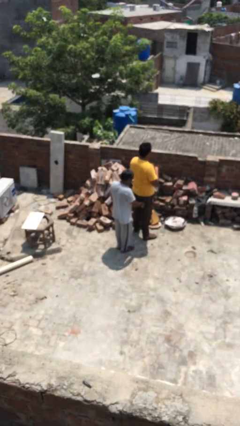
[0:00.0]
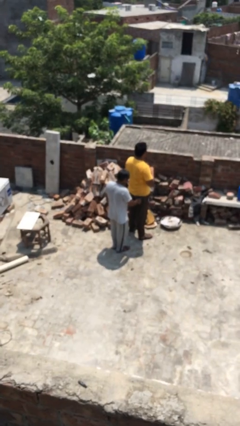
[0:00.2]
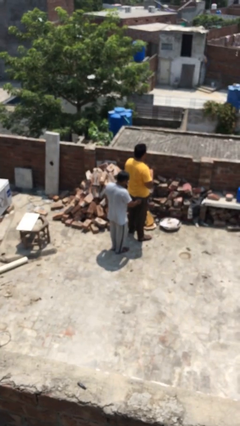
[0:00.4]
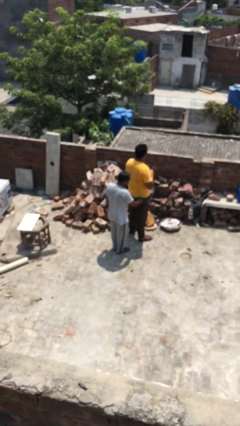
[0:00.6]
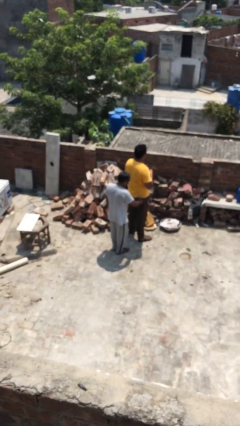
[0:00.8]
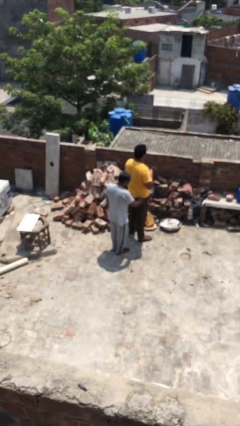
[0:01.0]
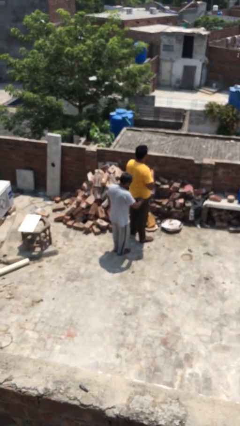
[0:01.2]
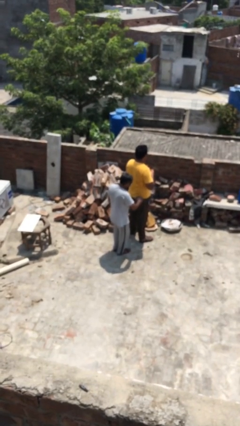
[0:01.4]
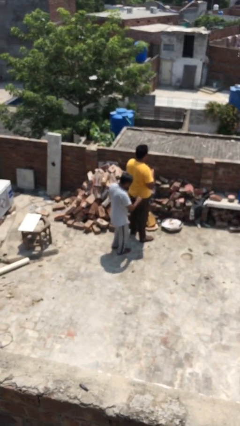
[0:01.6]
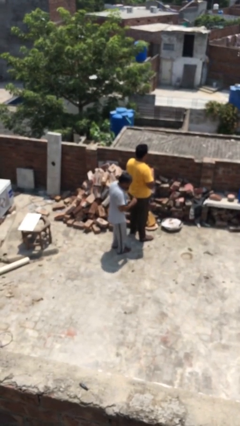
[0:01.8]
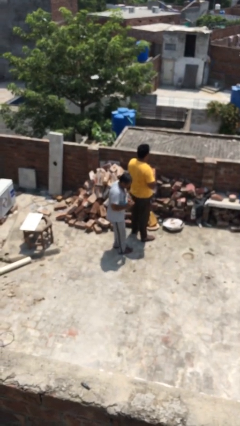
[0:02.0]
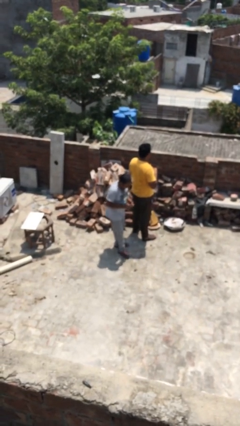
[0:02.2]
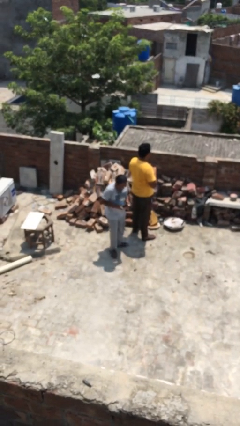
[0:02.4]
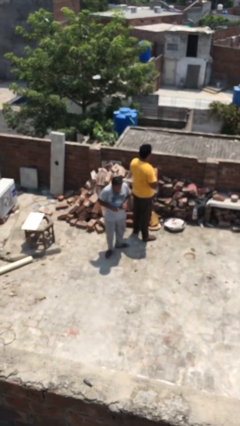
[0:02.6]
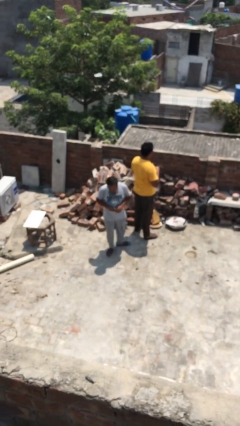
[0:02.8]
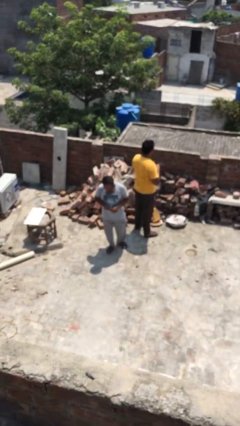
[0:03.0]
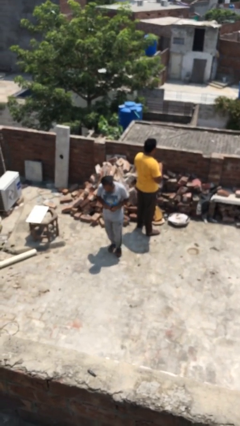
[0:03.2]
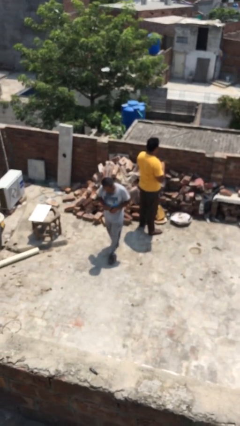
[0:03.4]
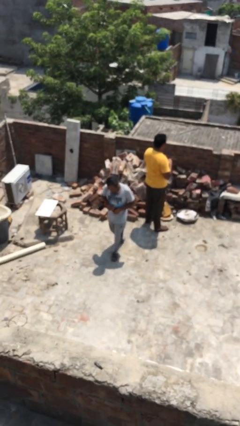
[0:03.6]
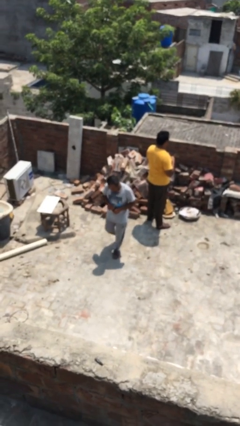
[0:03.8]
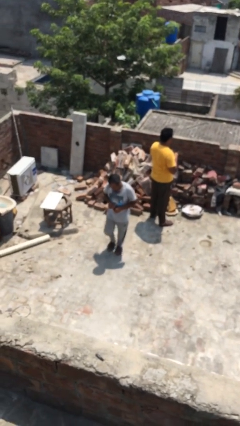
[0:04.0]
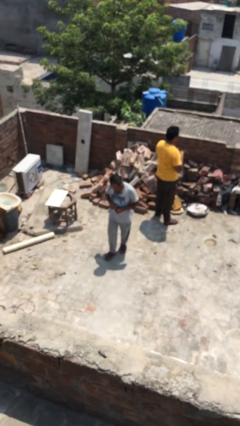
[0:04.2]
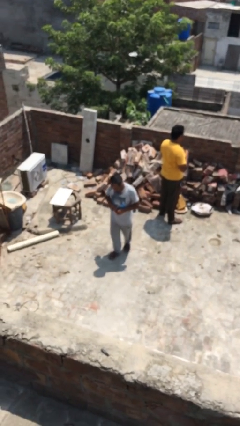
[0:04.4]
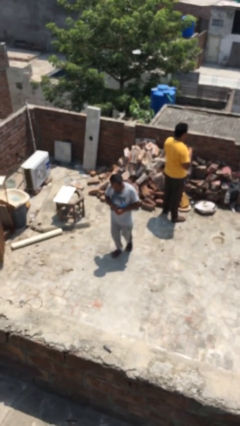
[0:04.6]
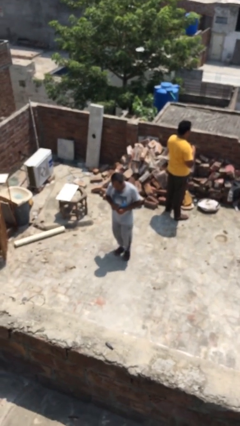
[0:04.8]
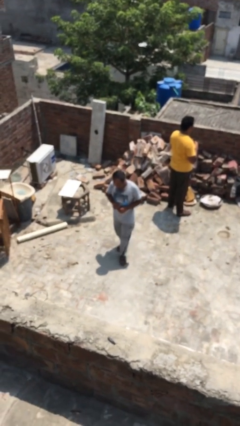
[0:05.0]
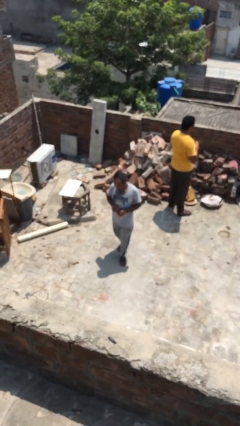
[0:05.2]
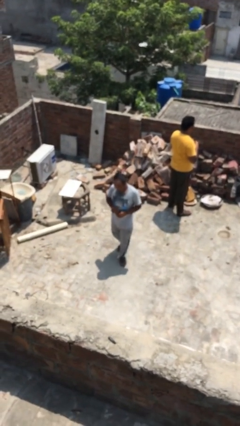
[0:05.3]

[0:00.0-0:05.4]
person steals object from person

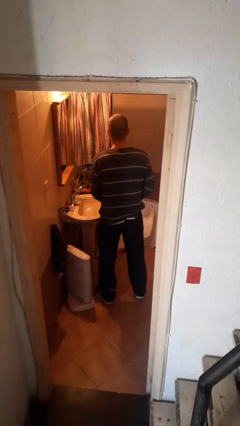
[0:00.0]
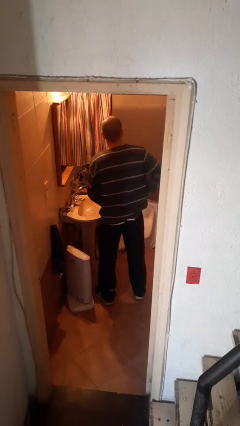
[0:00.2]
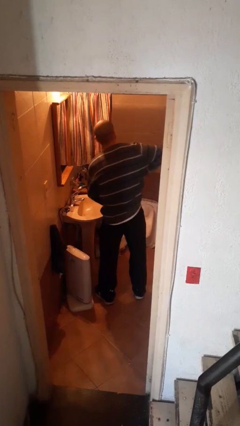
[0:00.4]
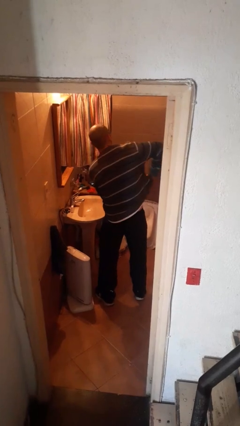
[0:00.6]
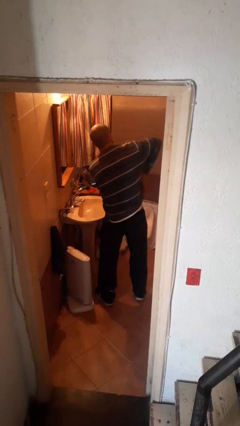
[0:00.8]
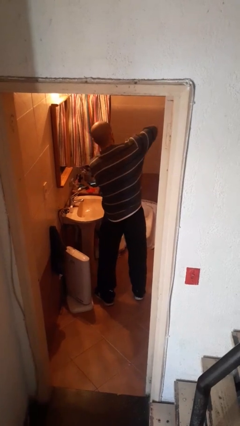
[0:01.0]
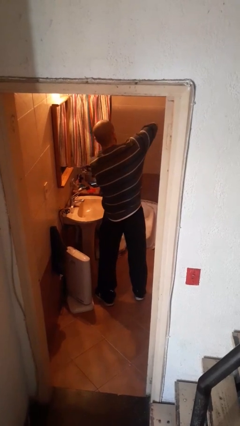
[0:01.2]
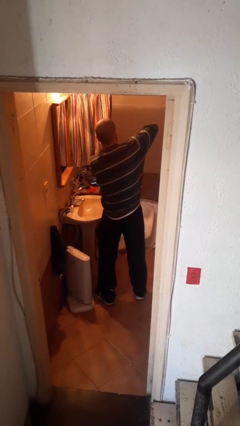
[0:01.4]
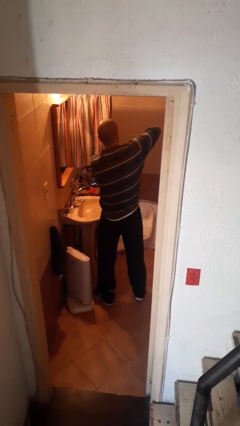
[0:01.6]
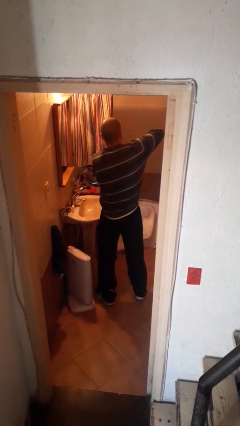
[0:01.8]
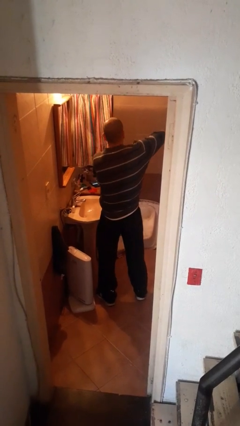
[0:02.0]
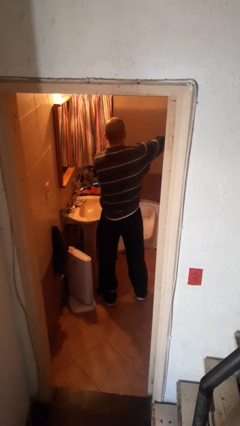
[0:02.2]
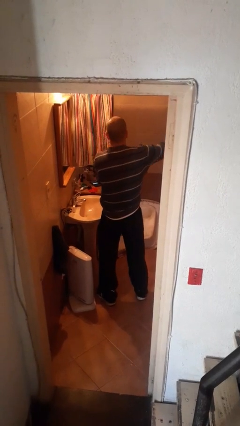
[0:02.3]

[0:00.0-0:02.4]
person applies deodorant

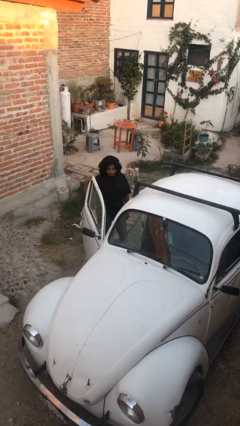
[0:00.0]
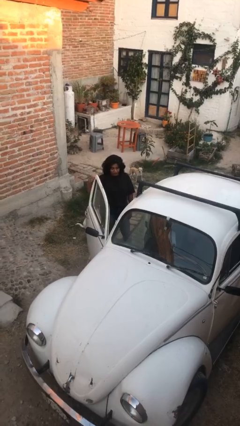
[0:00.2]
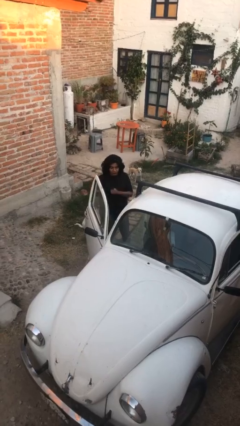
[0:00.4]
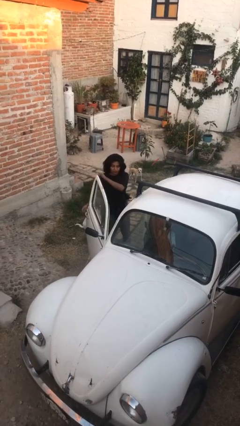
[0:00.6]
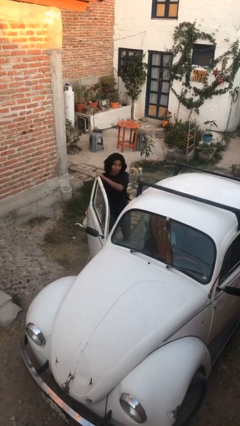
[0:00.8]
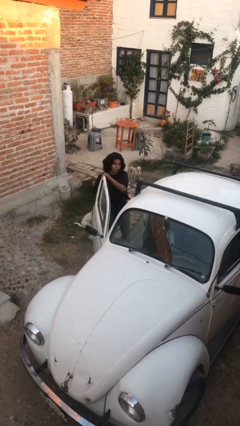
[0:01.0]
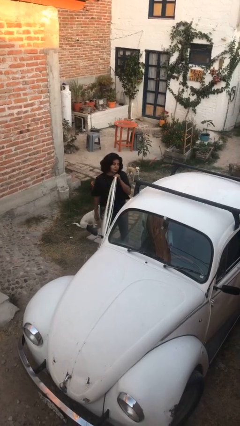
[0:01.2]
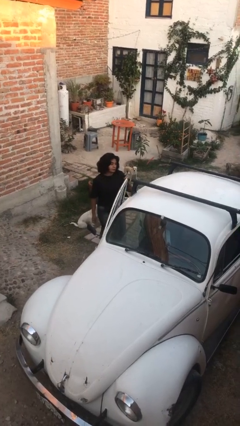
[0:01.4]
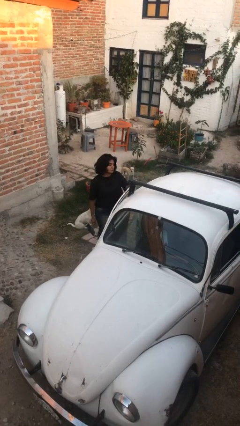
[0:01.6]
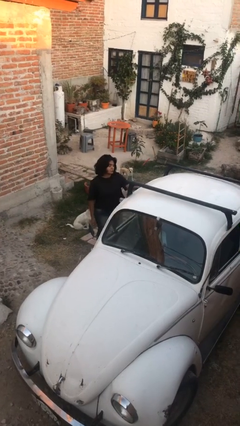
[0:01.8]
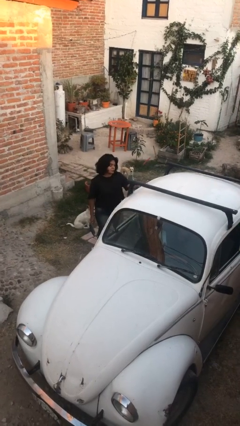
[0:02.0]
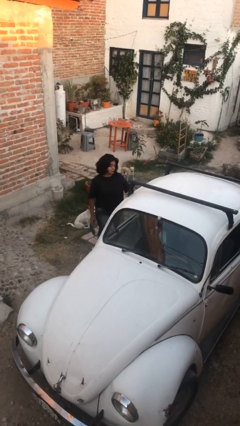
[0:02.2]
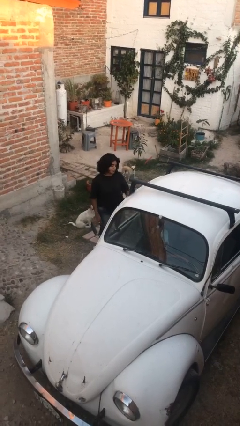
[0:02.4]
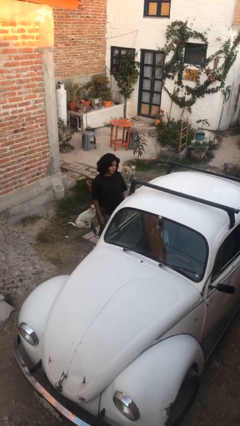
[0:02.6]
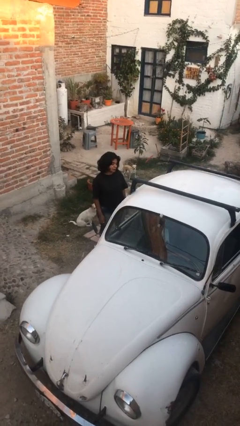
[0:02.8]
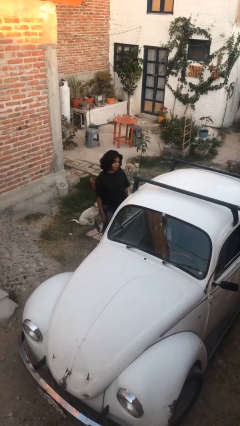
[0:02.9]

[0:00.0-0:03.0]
person closes car door

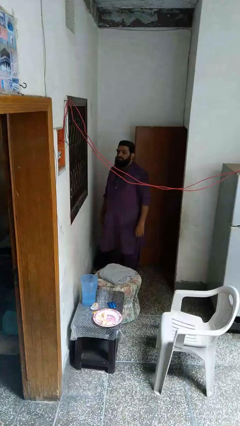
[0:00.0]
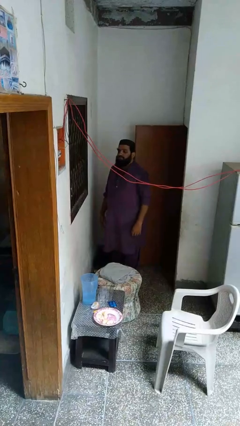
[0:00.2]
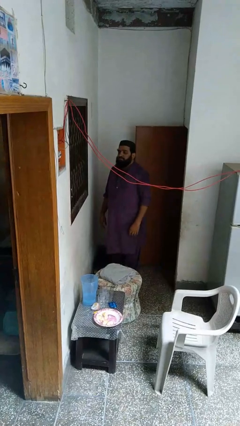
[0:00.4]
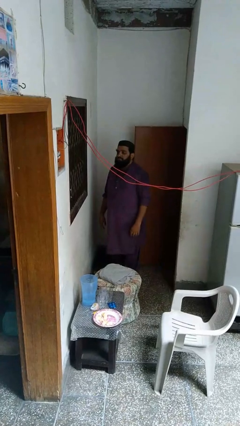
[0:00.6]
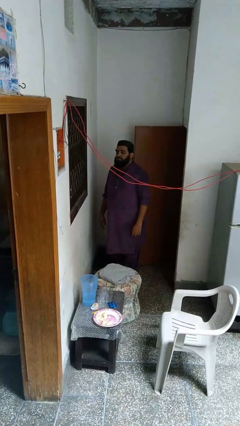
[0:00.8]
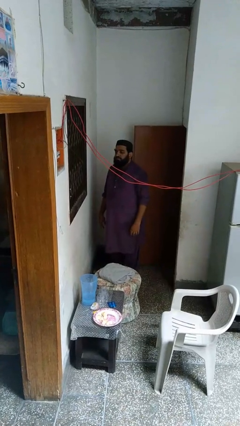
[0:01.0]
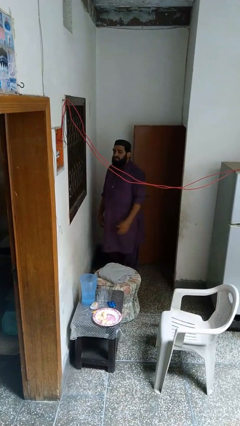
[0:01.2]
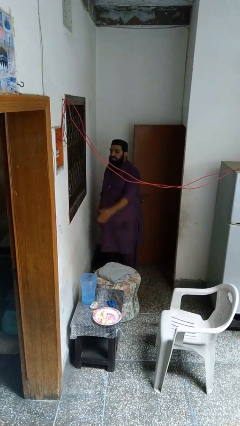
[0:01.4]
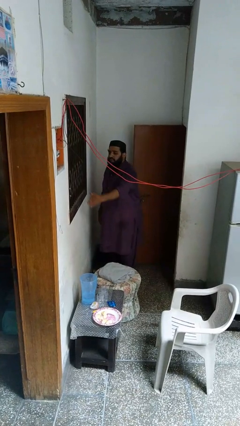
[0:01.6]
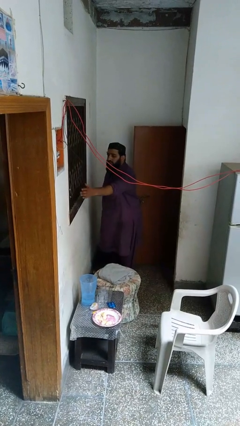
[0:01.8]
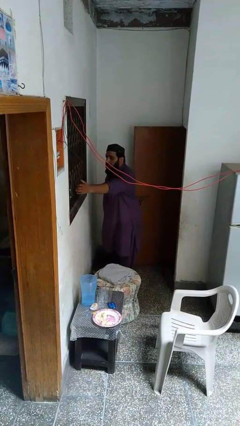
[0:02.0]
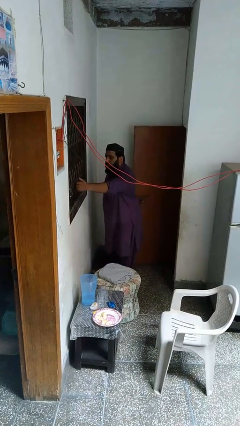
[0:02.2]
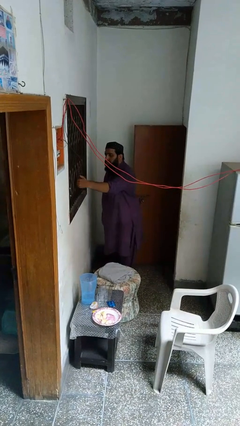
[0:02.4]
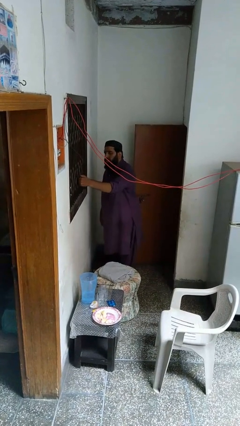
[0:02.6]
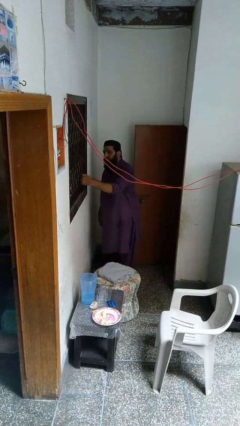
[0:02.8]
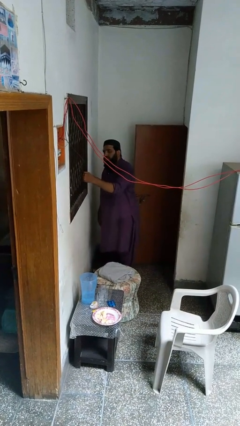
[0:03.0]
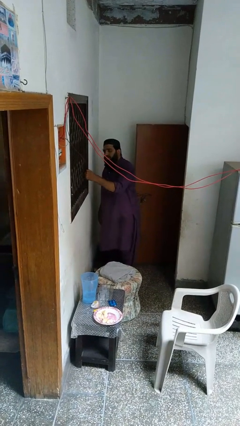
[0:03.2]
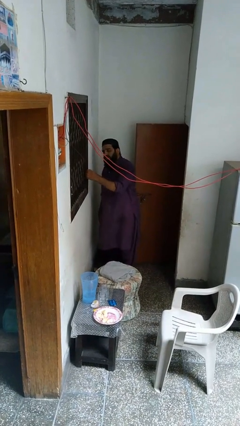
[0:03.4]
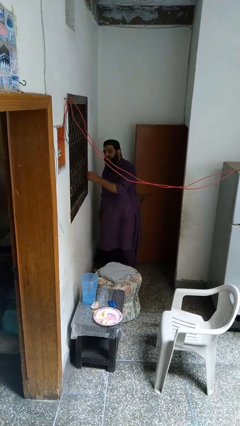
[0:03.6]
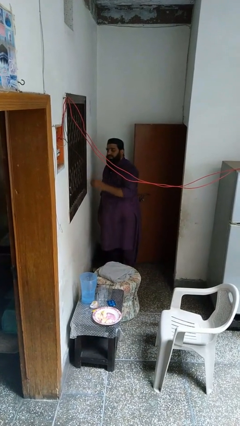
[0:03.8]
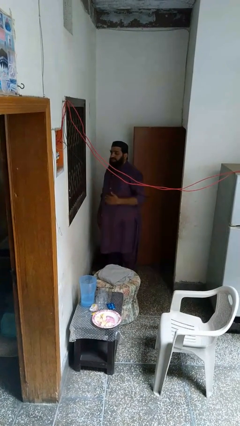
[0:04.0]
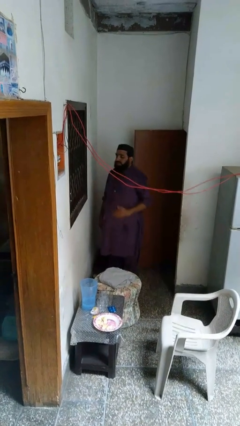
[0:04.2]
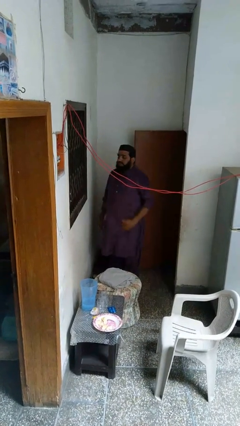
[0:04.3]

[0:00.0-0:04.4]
person closes home window

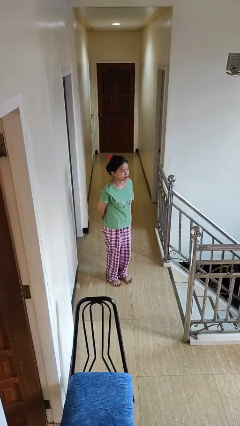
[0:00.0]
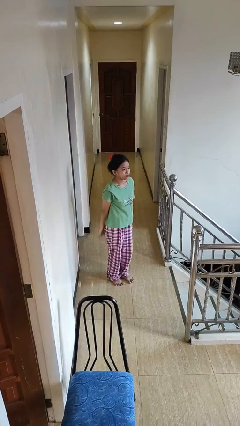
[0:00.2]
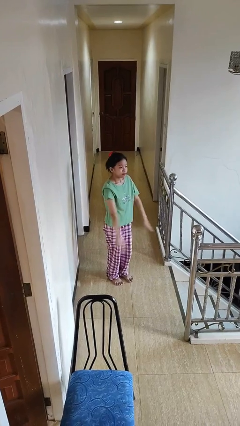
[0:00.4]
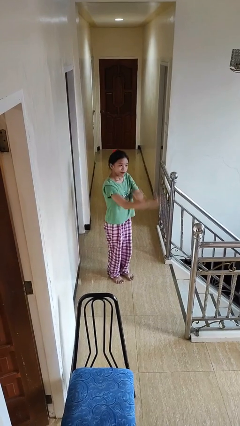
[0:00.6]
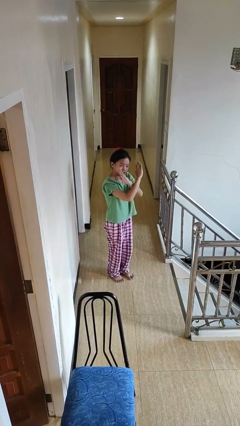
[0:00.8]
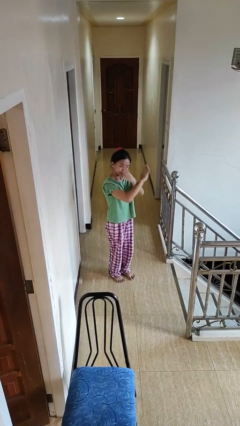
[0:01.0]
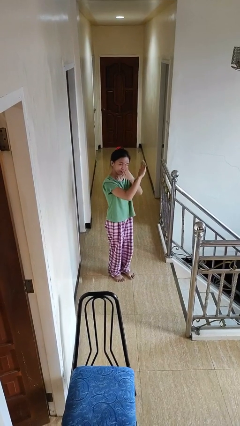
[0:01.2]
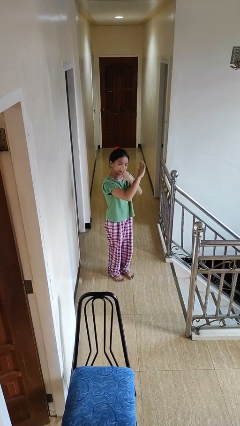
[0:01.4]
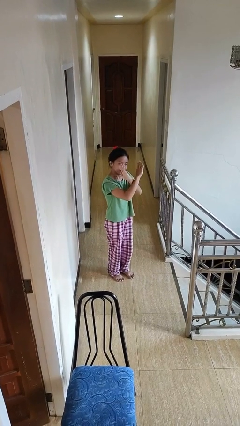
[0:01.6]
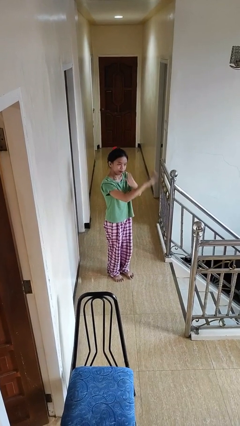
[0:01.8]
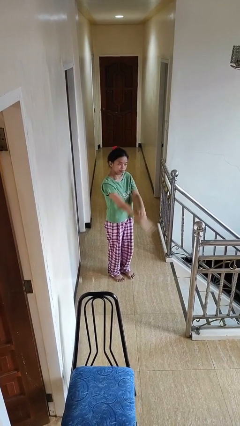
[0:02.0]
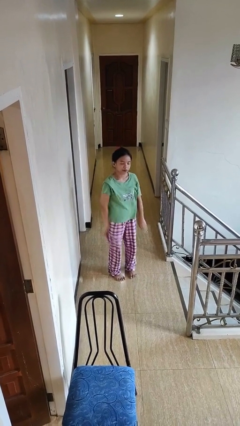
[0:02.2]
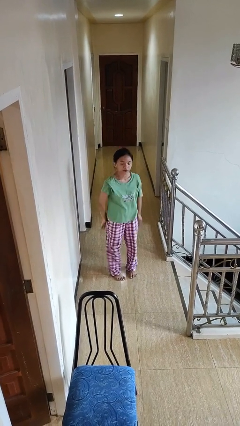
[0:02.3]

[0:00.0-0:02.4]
person gestures arms x
